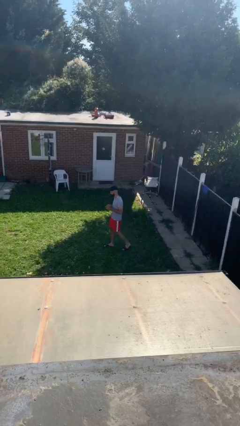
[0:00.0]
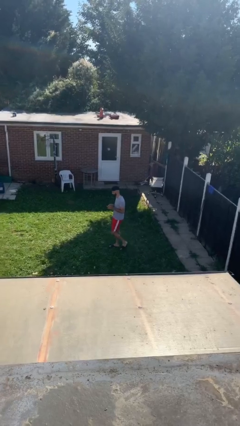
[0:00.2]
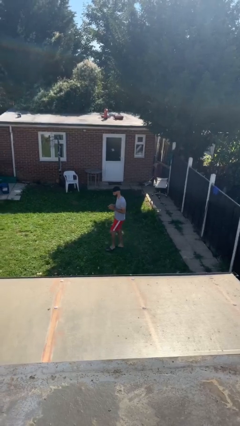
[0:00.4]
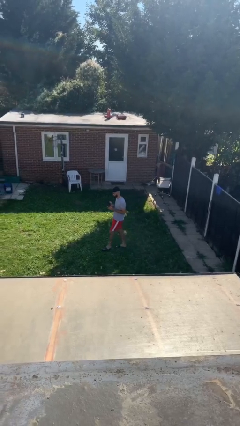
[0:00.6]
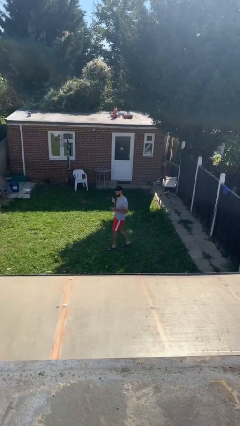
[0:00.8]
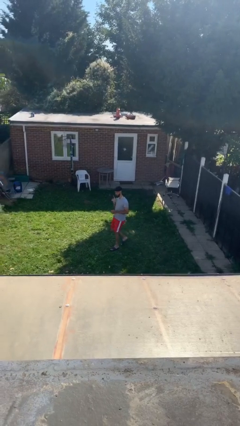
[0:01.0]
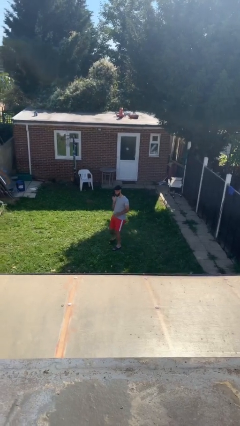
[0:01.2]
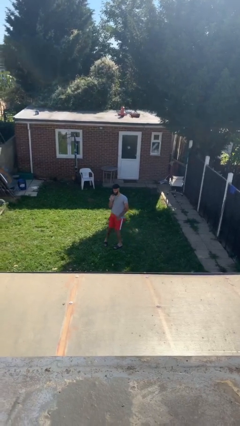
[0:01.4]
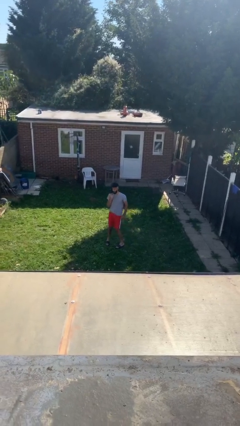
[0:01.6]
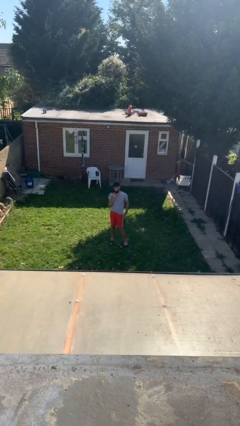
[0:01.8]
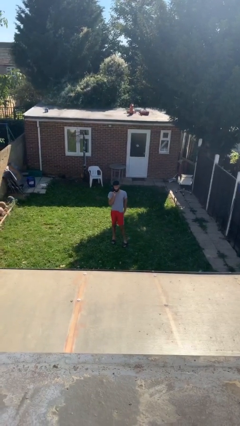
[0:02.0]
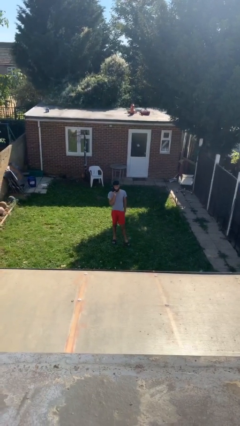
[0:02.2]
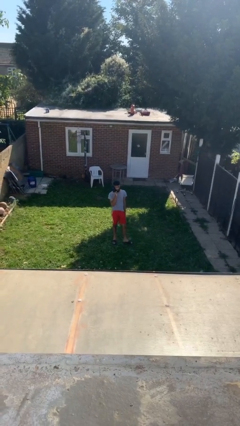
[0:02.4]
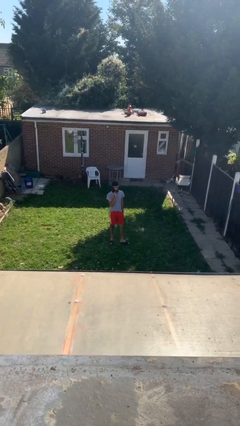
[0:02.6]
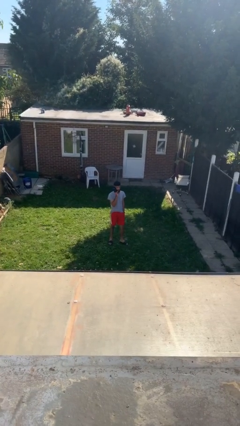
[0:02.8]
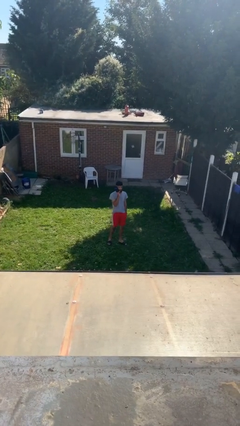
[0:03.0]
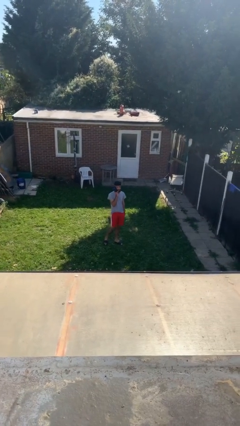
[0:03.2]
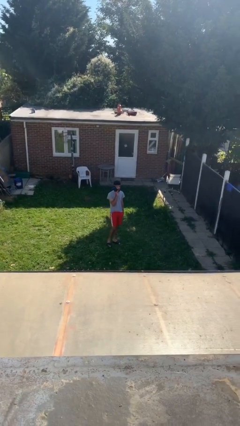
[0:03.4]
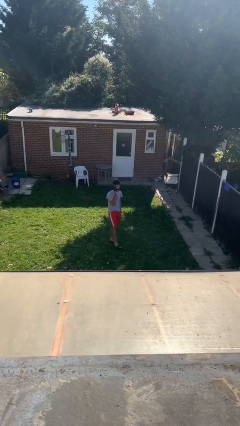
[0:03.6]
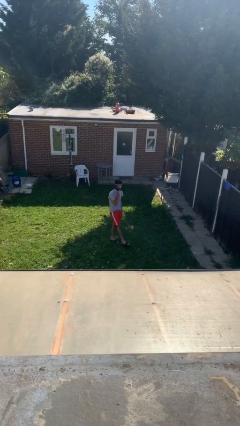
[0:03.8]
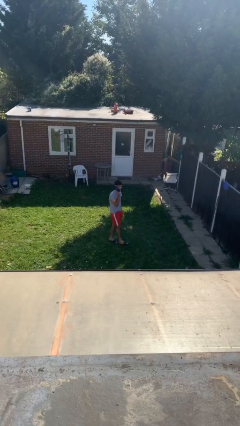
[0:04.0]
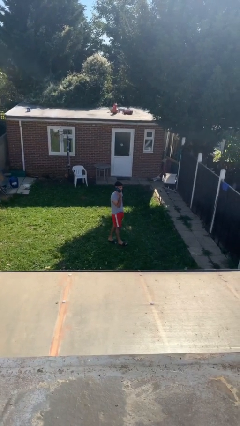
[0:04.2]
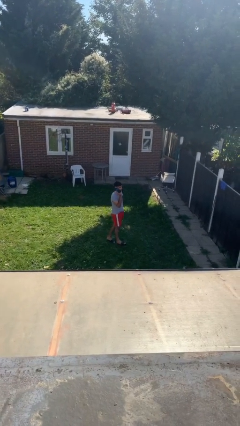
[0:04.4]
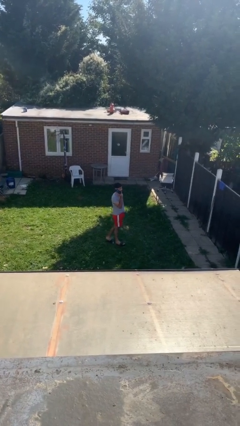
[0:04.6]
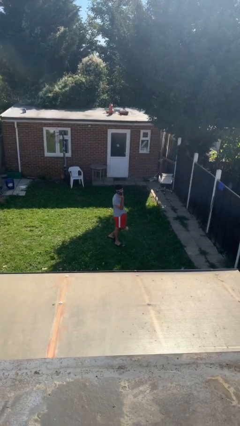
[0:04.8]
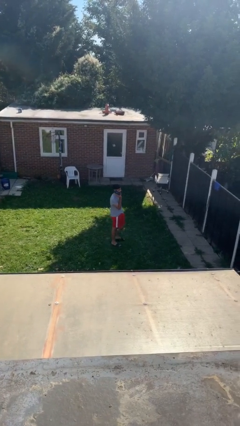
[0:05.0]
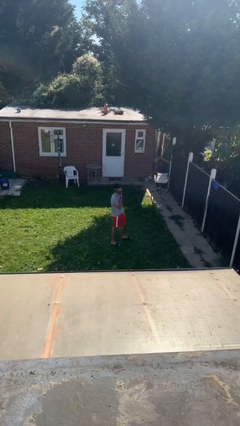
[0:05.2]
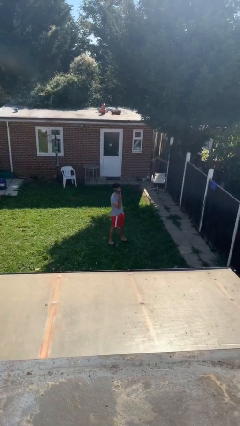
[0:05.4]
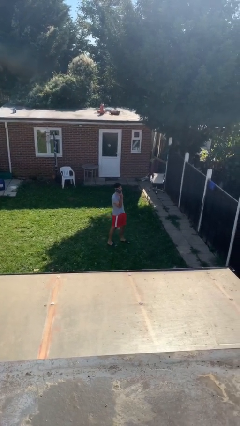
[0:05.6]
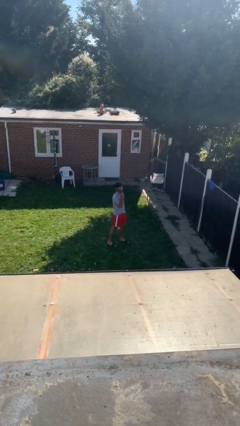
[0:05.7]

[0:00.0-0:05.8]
person talks on phone

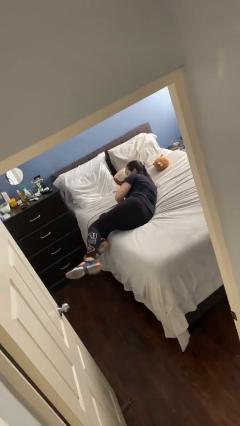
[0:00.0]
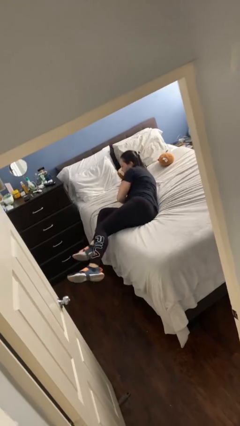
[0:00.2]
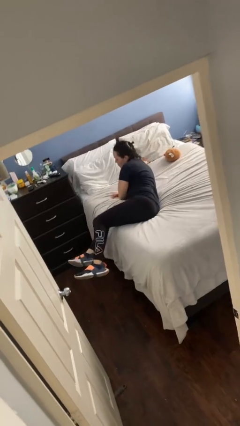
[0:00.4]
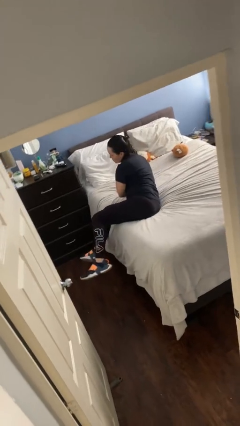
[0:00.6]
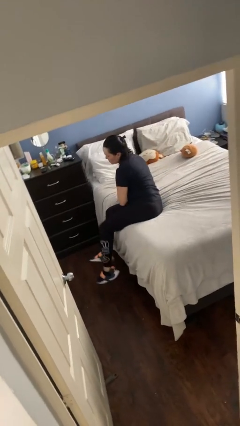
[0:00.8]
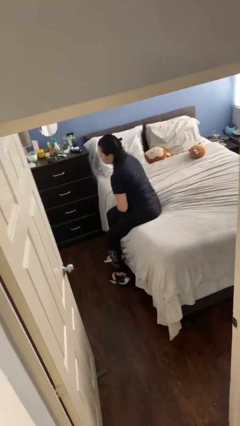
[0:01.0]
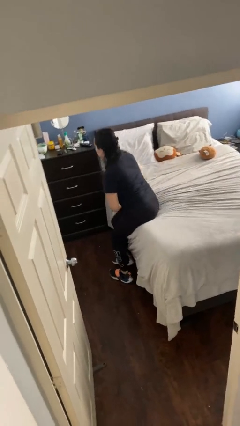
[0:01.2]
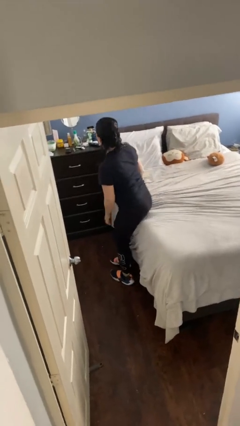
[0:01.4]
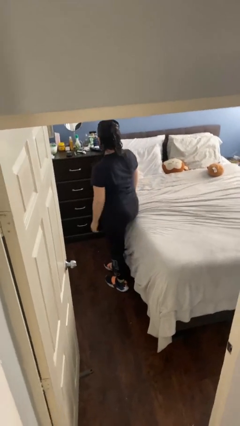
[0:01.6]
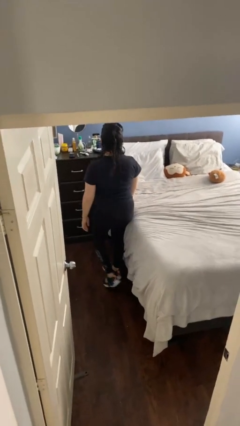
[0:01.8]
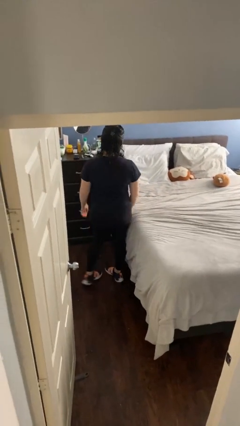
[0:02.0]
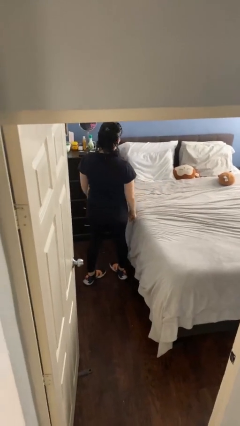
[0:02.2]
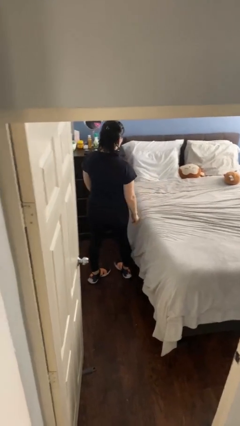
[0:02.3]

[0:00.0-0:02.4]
person stands up

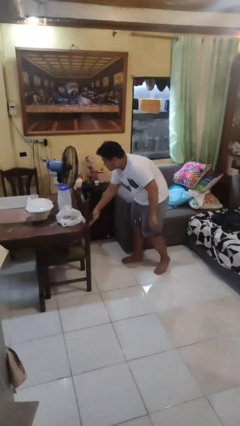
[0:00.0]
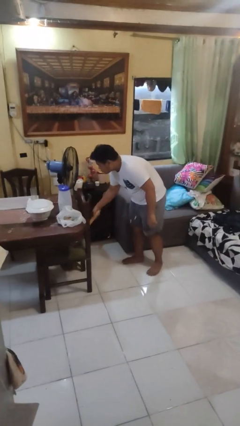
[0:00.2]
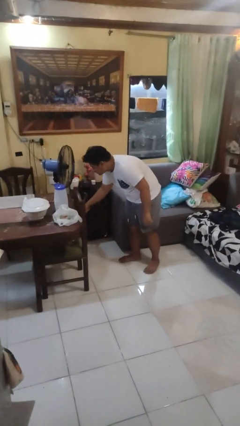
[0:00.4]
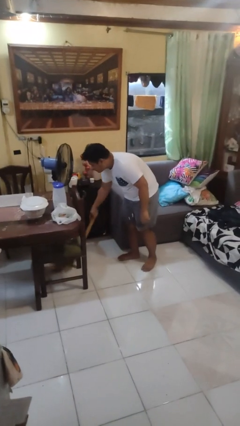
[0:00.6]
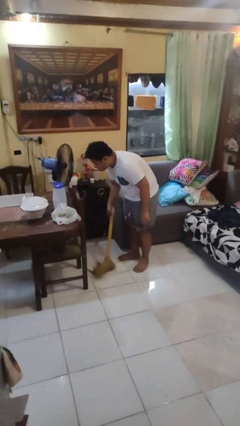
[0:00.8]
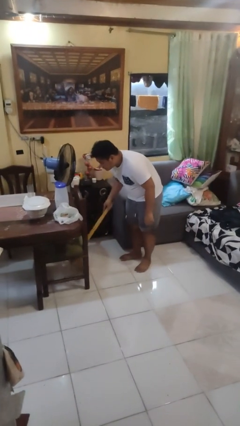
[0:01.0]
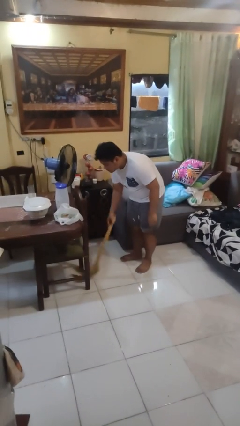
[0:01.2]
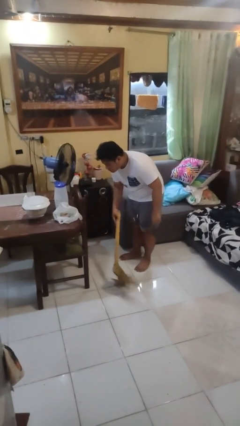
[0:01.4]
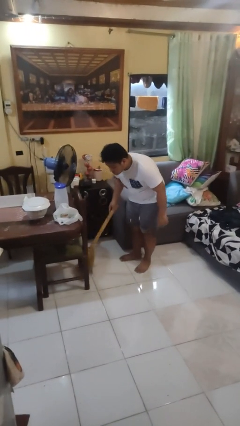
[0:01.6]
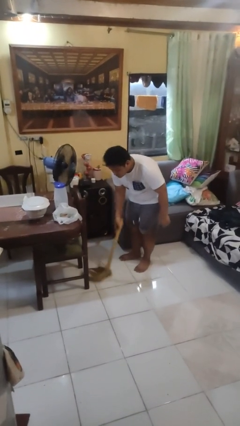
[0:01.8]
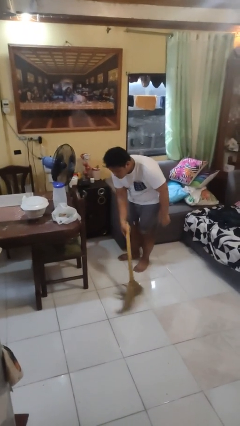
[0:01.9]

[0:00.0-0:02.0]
person sweeps floor

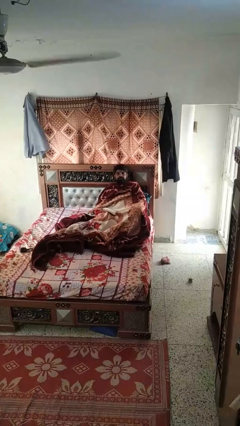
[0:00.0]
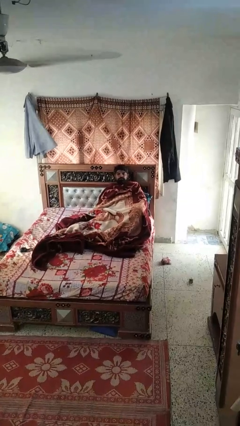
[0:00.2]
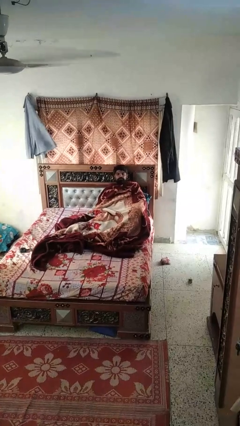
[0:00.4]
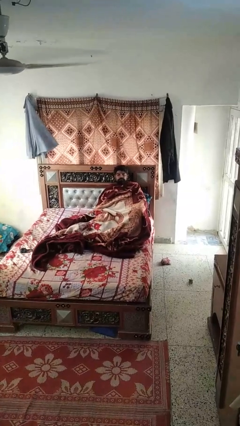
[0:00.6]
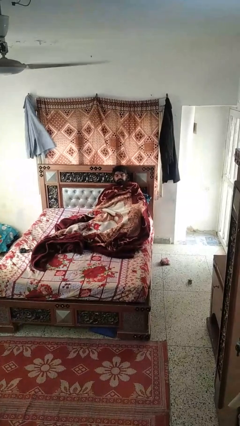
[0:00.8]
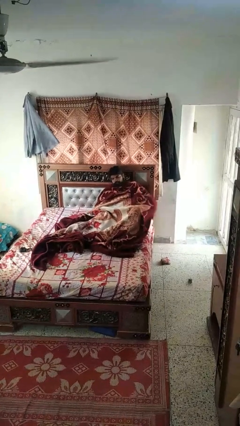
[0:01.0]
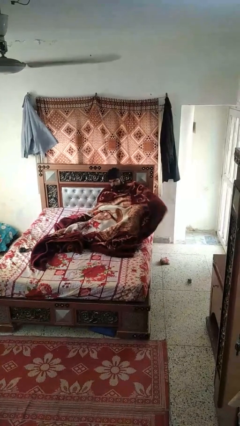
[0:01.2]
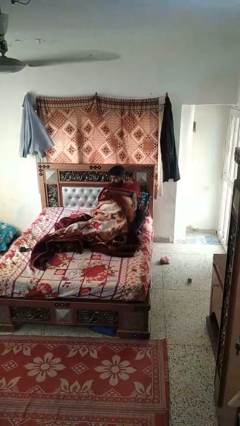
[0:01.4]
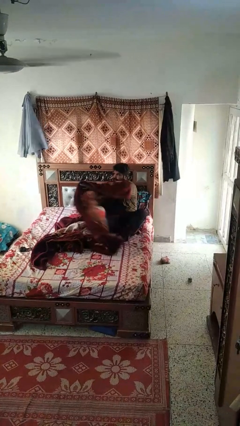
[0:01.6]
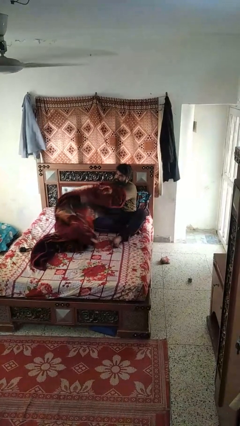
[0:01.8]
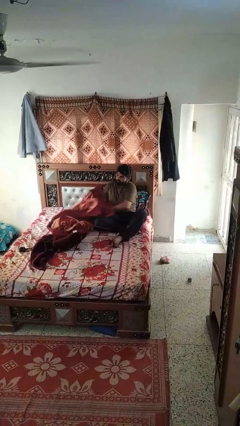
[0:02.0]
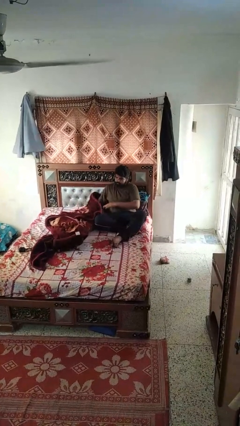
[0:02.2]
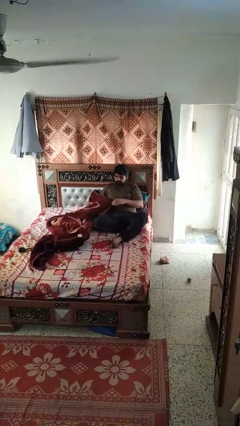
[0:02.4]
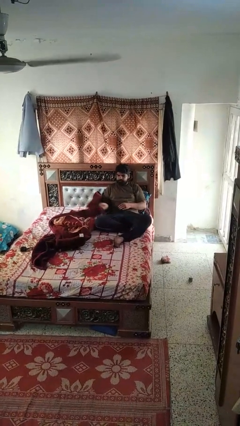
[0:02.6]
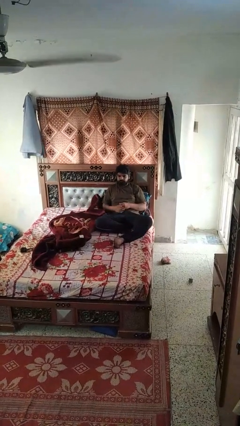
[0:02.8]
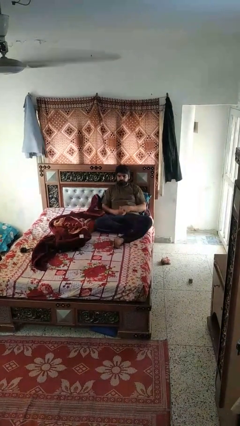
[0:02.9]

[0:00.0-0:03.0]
person uncovers with blanket

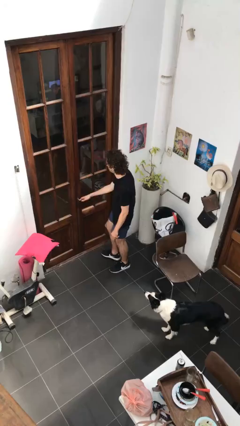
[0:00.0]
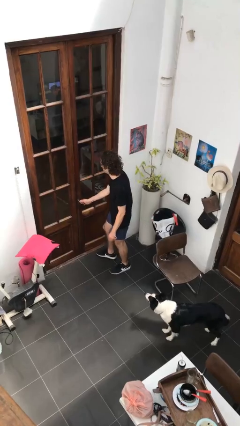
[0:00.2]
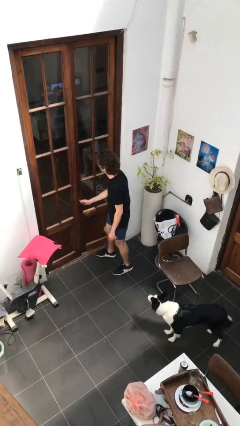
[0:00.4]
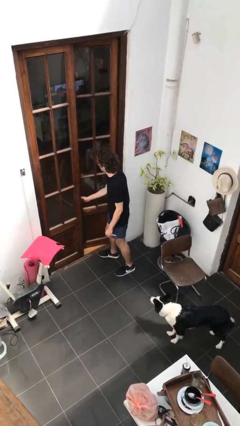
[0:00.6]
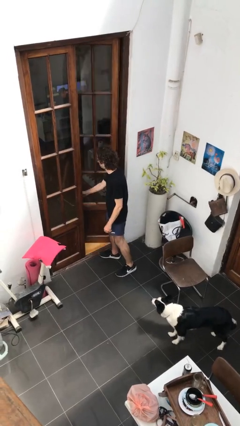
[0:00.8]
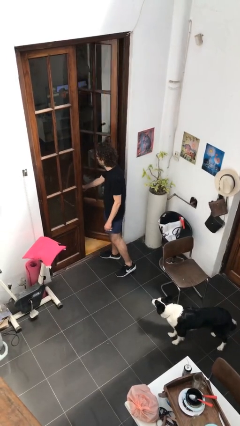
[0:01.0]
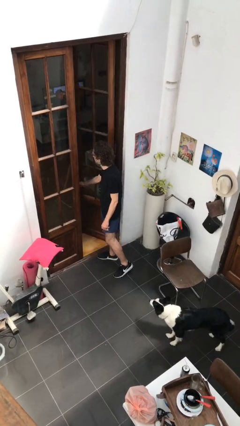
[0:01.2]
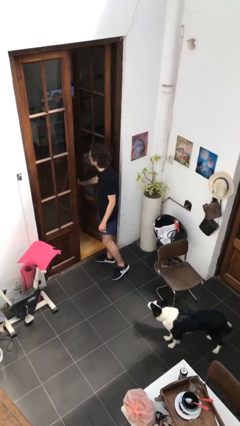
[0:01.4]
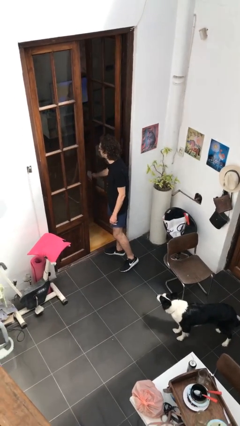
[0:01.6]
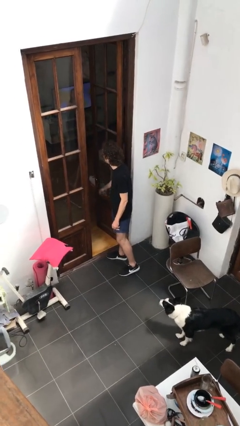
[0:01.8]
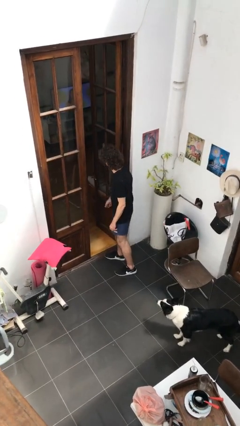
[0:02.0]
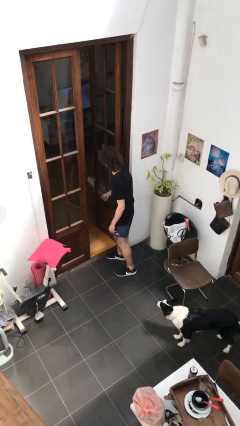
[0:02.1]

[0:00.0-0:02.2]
person opens facility door

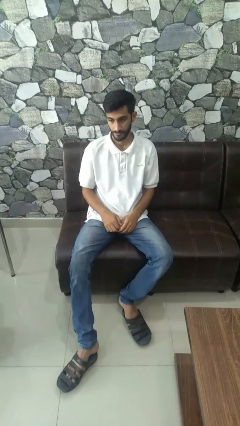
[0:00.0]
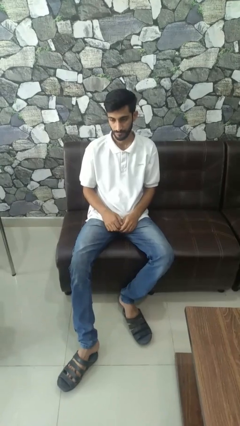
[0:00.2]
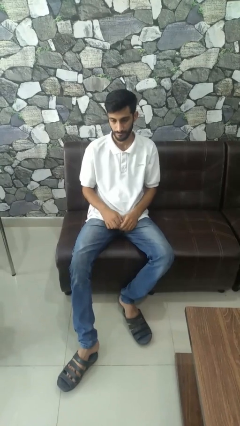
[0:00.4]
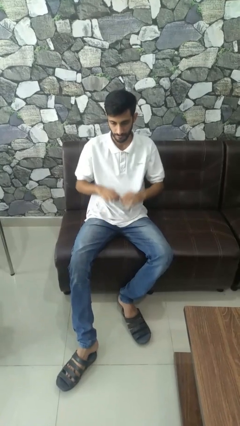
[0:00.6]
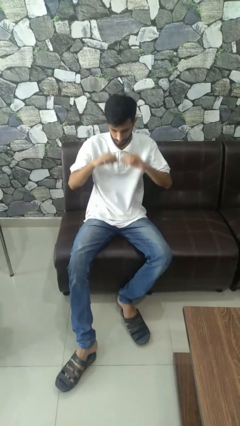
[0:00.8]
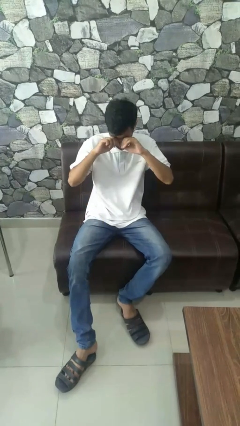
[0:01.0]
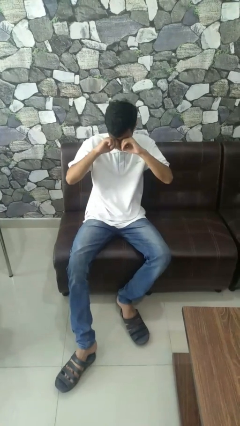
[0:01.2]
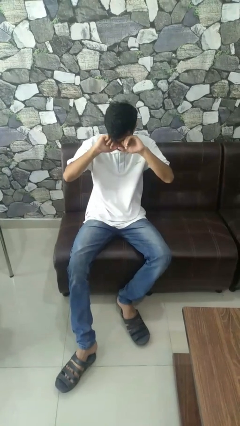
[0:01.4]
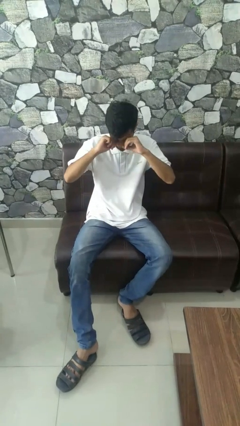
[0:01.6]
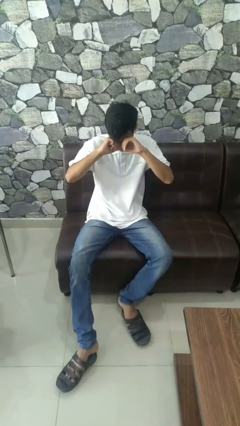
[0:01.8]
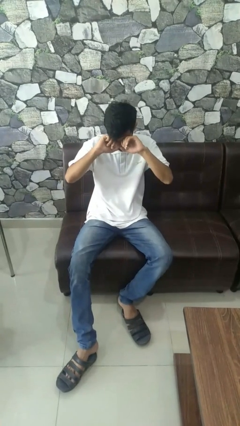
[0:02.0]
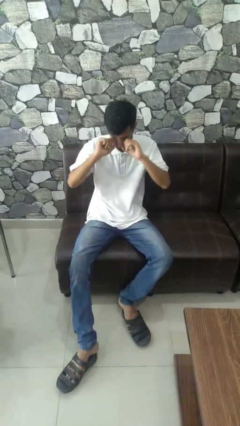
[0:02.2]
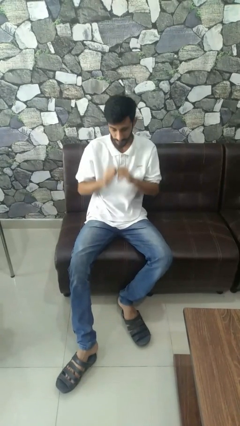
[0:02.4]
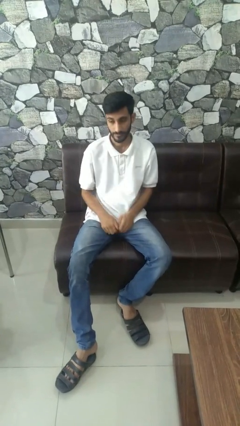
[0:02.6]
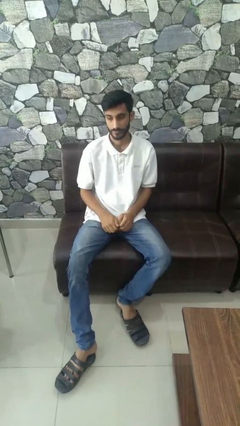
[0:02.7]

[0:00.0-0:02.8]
person rubs eyes
